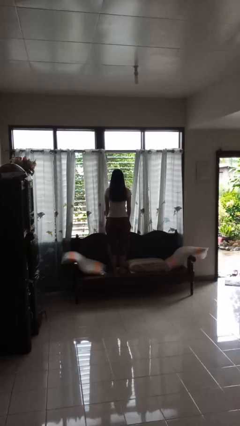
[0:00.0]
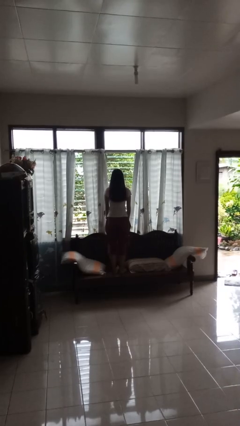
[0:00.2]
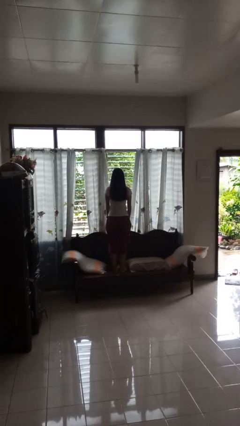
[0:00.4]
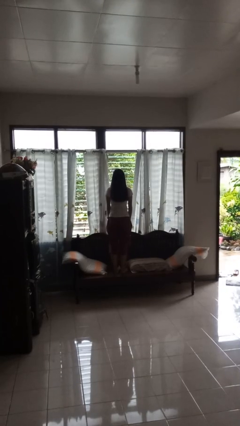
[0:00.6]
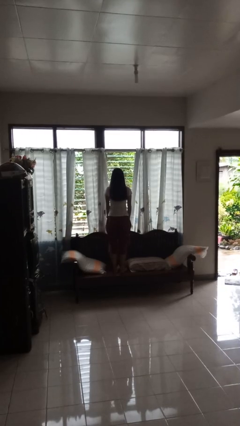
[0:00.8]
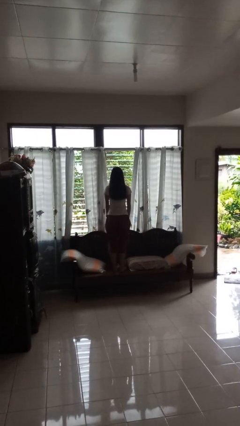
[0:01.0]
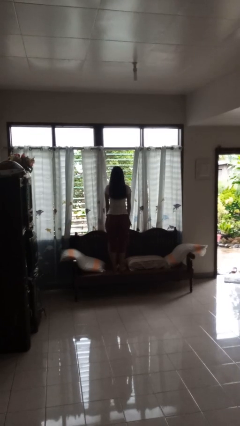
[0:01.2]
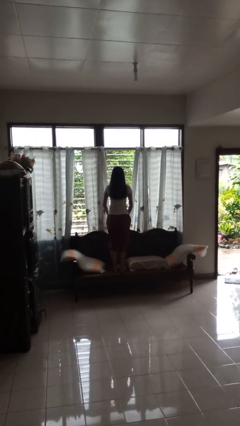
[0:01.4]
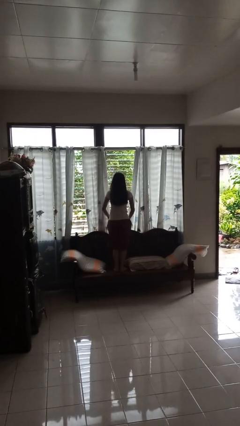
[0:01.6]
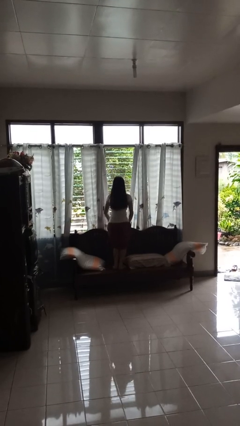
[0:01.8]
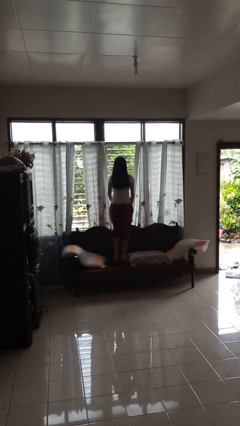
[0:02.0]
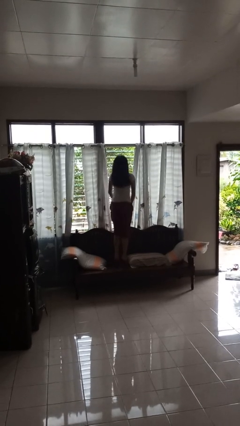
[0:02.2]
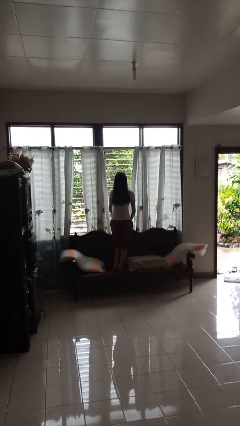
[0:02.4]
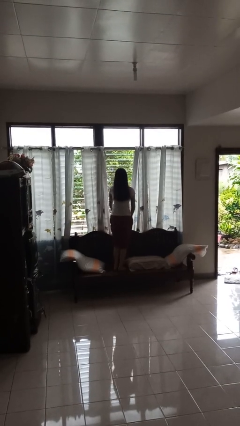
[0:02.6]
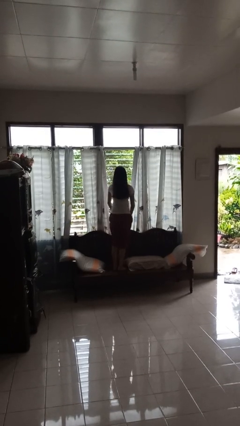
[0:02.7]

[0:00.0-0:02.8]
person jumps on couch

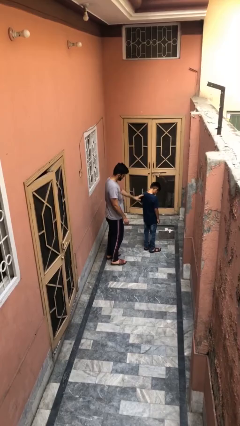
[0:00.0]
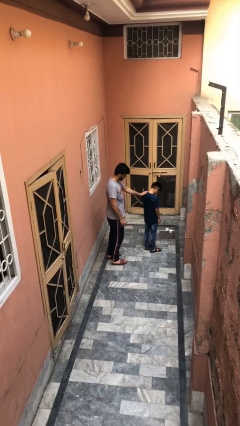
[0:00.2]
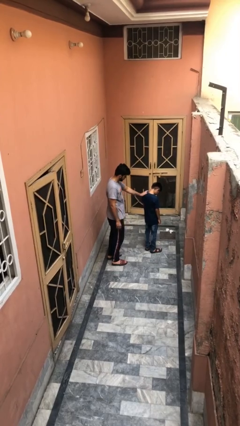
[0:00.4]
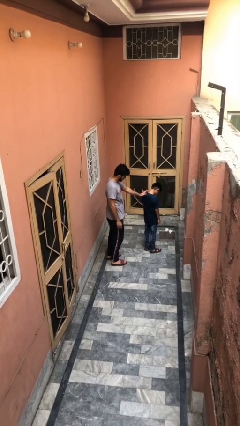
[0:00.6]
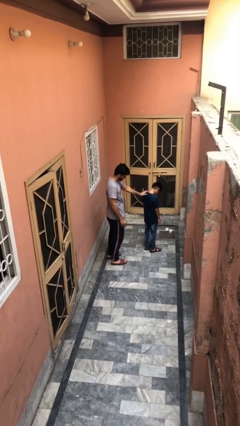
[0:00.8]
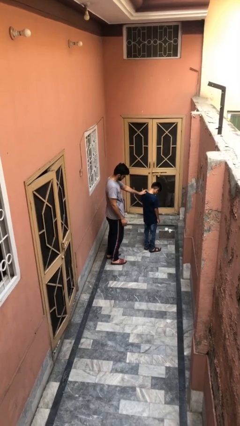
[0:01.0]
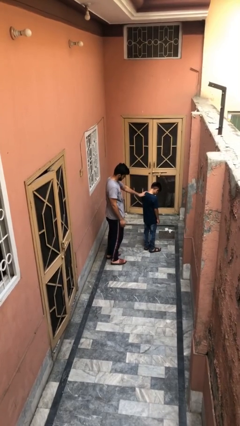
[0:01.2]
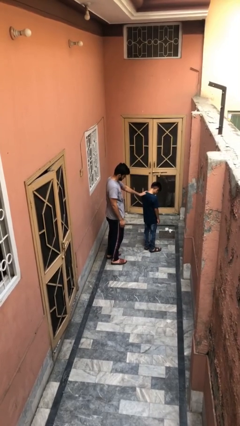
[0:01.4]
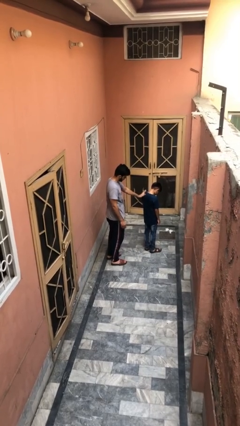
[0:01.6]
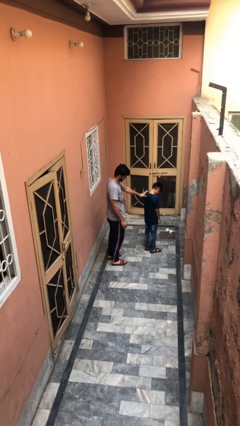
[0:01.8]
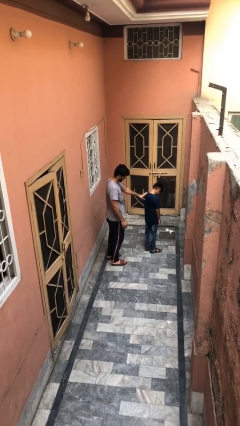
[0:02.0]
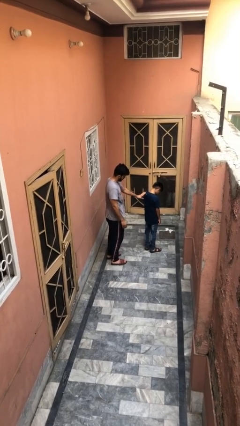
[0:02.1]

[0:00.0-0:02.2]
person touches back of person

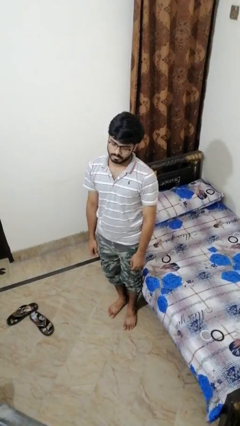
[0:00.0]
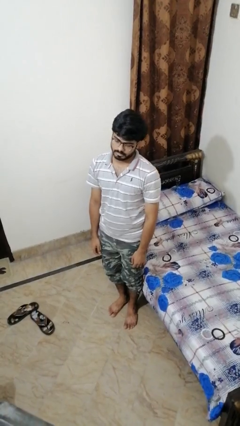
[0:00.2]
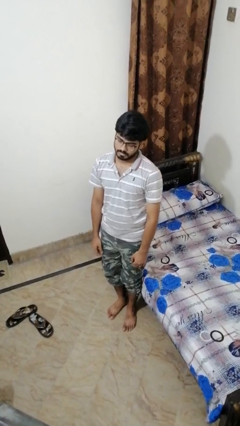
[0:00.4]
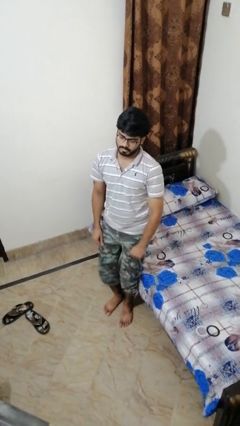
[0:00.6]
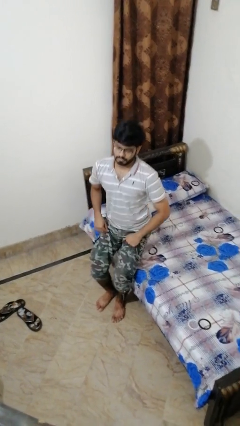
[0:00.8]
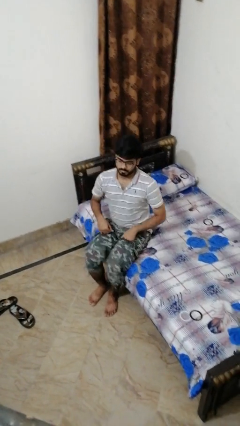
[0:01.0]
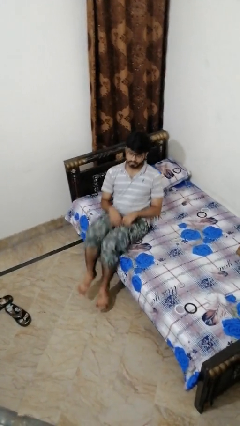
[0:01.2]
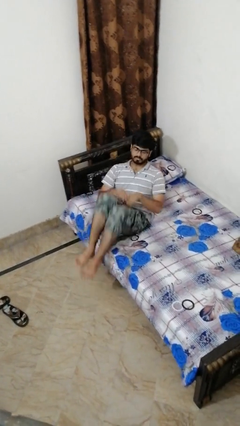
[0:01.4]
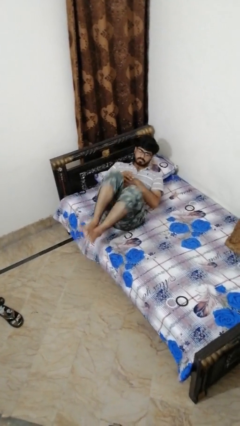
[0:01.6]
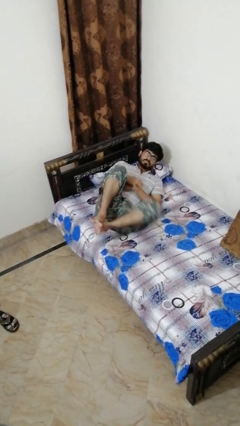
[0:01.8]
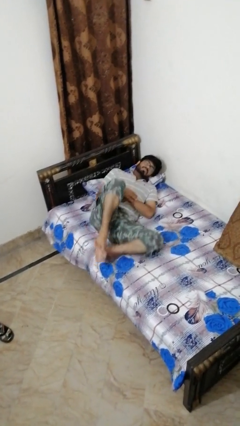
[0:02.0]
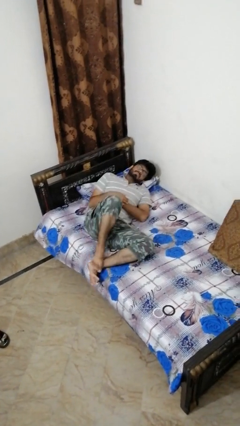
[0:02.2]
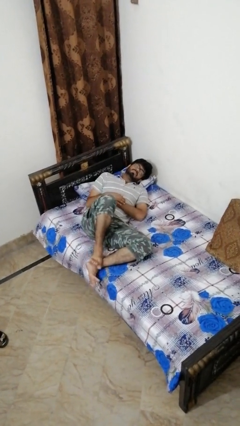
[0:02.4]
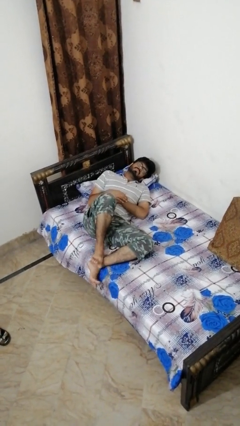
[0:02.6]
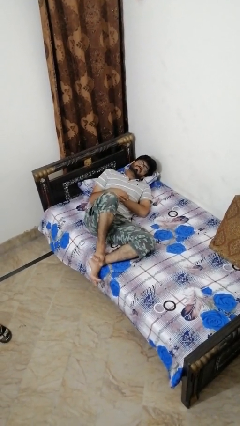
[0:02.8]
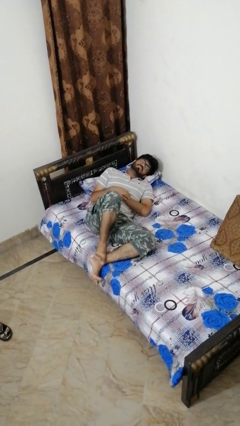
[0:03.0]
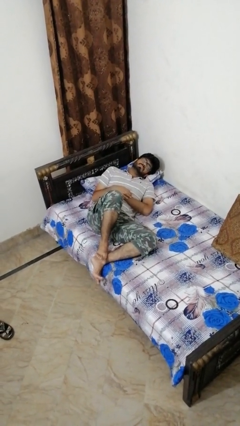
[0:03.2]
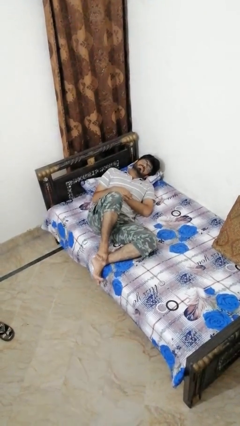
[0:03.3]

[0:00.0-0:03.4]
person lies down on bed

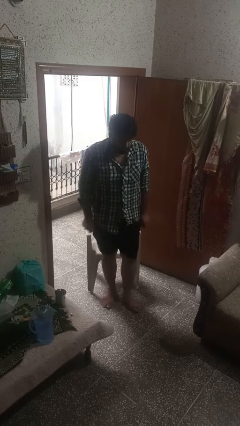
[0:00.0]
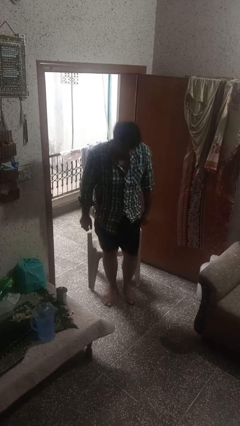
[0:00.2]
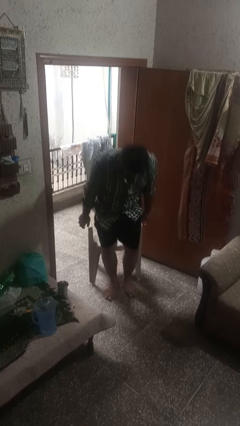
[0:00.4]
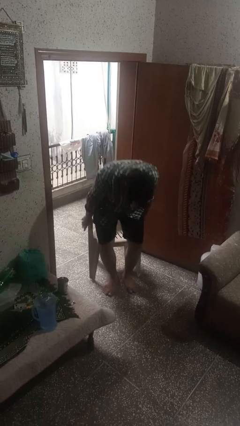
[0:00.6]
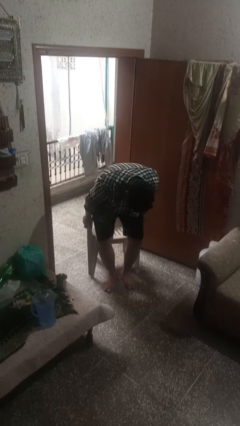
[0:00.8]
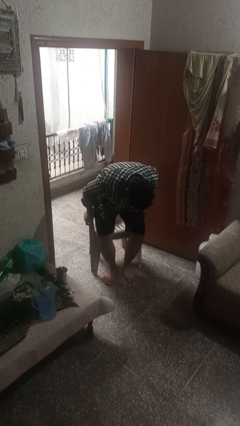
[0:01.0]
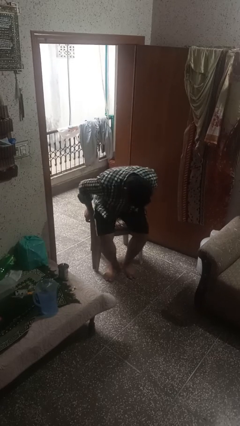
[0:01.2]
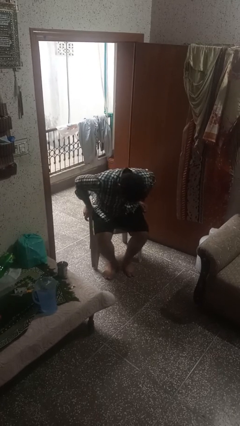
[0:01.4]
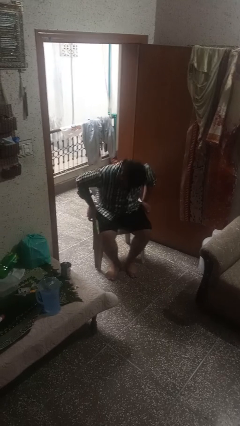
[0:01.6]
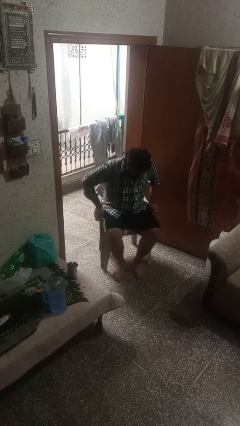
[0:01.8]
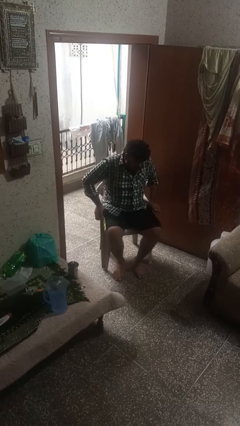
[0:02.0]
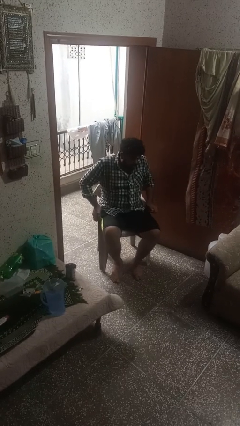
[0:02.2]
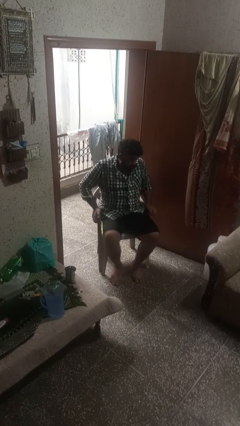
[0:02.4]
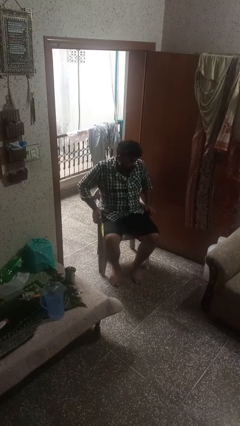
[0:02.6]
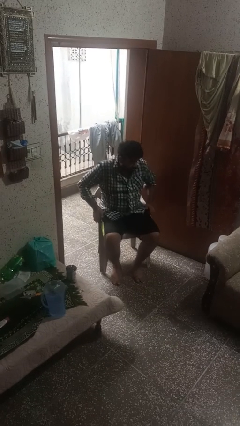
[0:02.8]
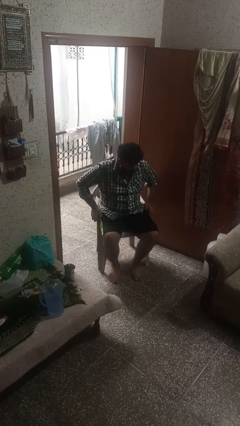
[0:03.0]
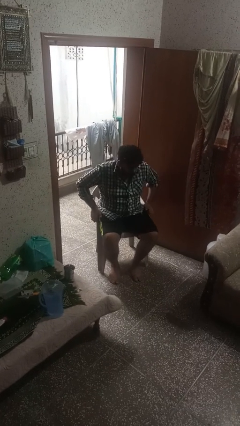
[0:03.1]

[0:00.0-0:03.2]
person sits down

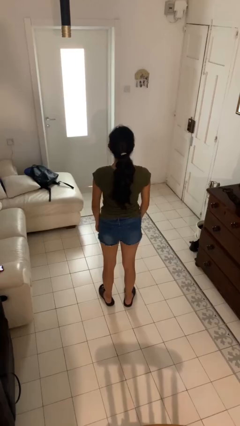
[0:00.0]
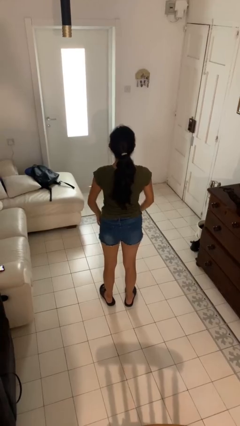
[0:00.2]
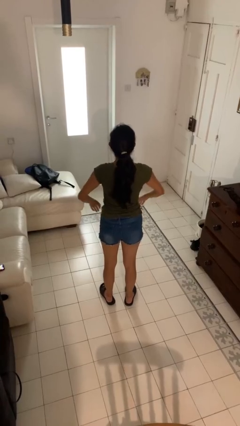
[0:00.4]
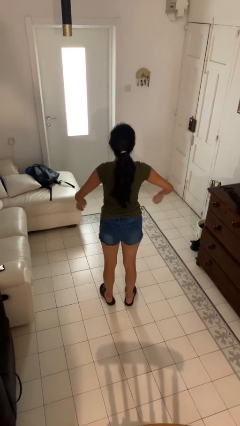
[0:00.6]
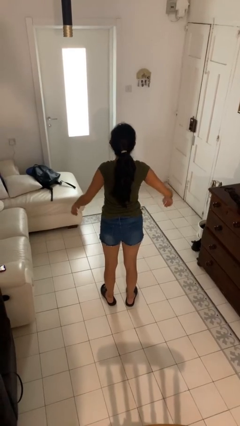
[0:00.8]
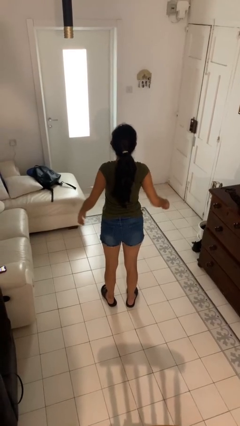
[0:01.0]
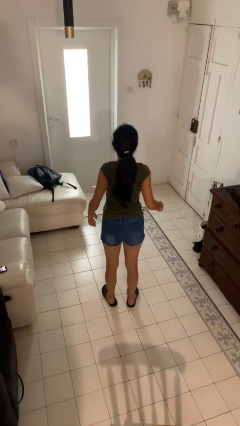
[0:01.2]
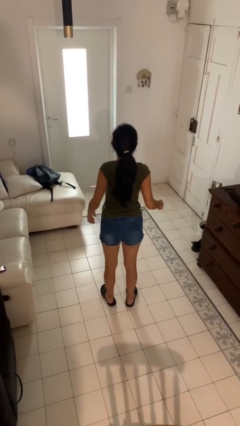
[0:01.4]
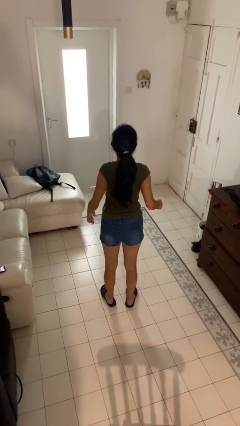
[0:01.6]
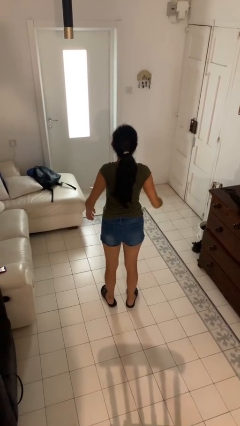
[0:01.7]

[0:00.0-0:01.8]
person stretches back

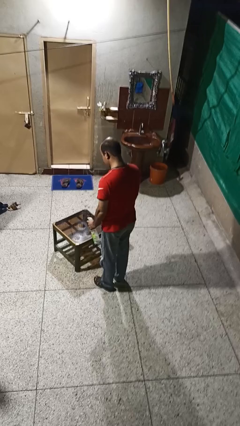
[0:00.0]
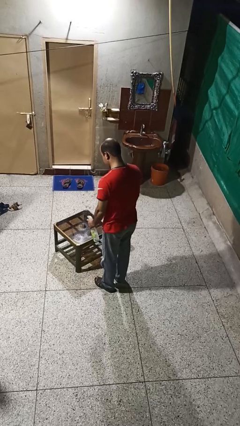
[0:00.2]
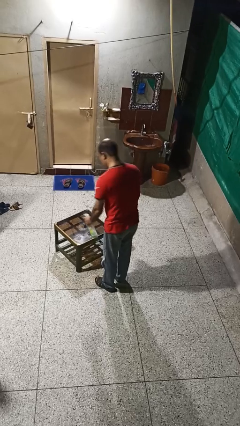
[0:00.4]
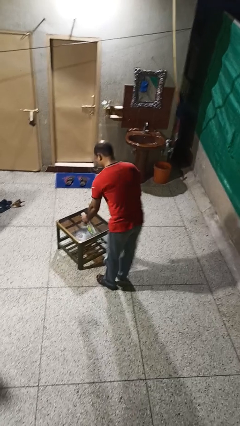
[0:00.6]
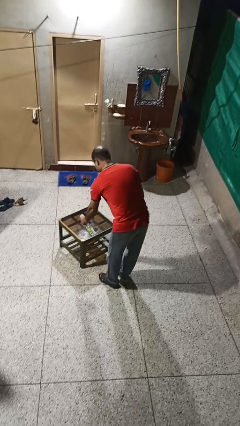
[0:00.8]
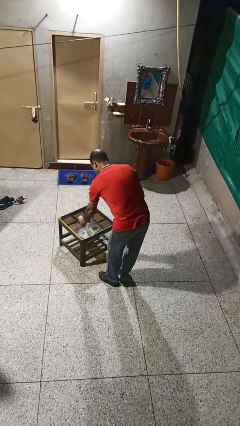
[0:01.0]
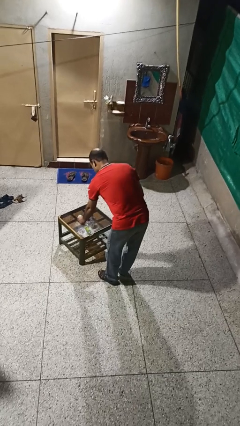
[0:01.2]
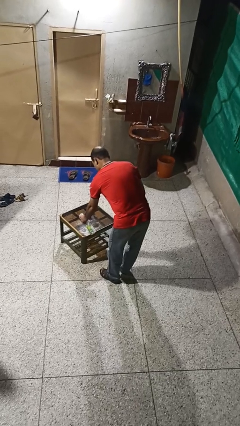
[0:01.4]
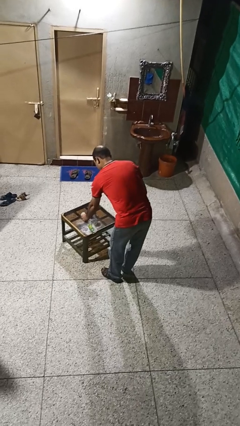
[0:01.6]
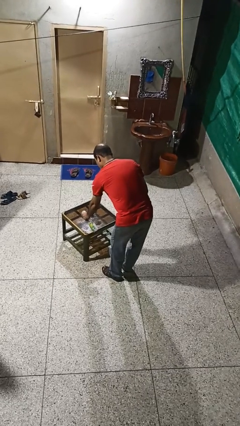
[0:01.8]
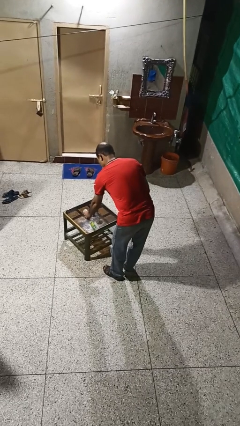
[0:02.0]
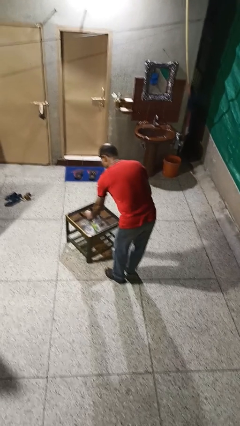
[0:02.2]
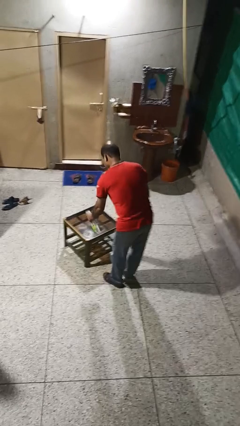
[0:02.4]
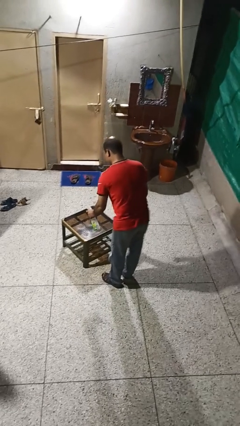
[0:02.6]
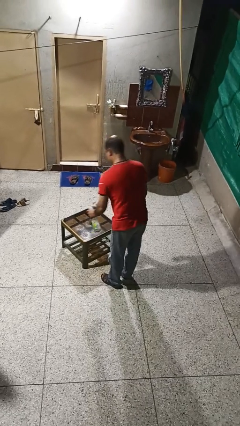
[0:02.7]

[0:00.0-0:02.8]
person sprays from bottle

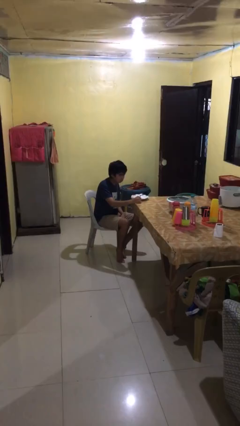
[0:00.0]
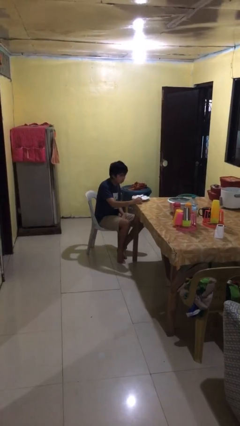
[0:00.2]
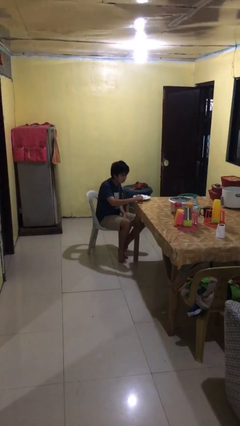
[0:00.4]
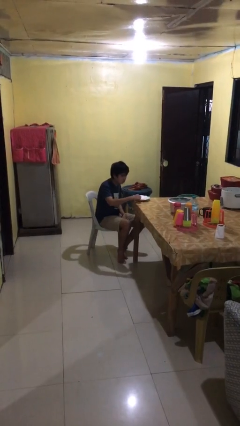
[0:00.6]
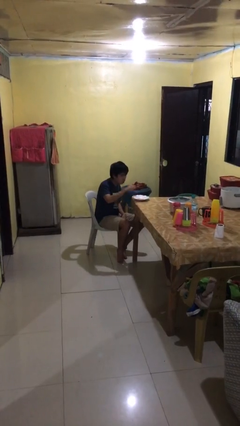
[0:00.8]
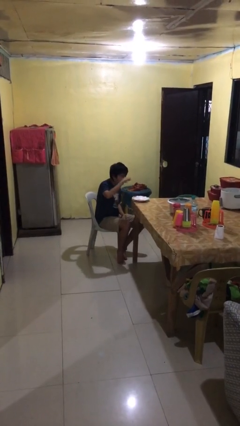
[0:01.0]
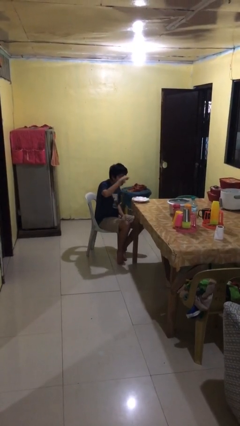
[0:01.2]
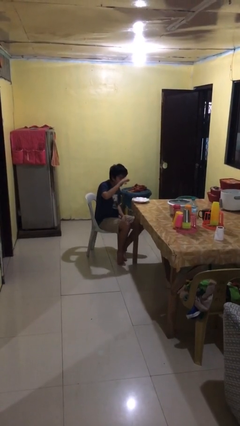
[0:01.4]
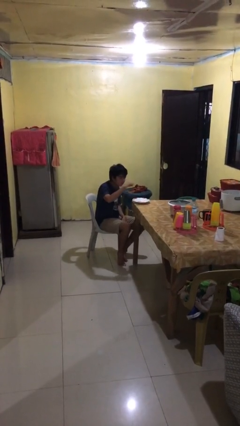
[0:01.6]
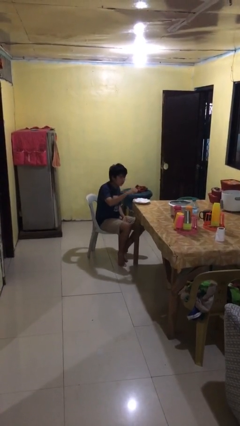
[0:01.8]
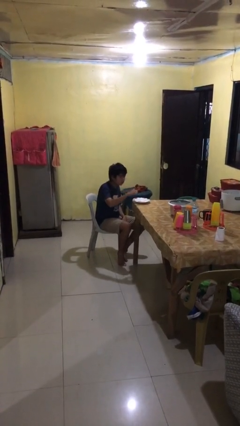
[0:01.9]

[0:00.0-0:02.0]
person eats with utensil
